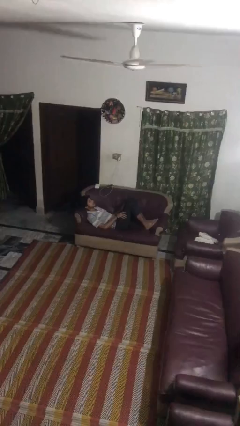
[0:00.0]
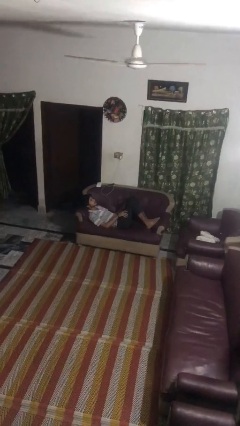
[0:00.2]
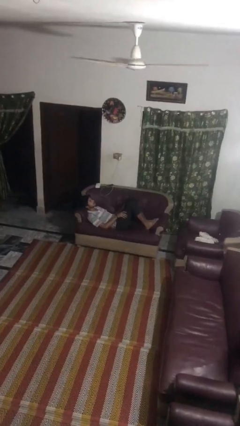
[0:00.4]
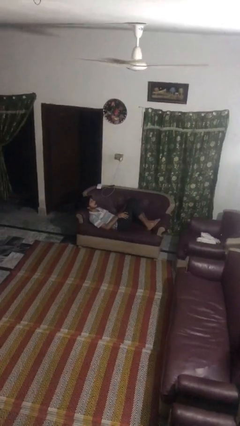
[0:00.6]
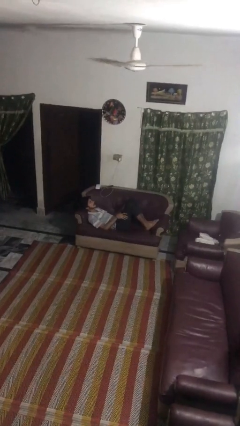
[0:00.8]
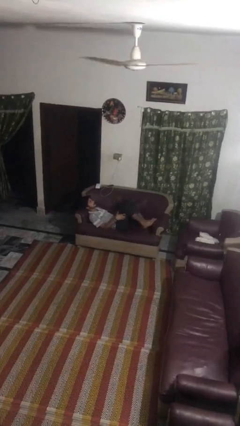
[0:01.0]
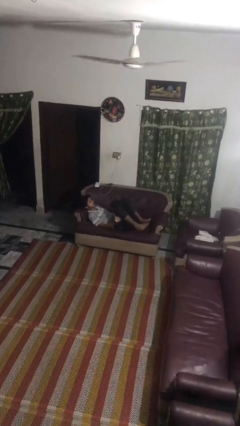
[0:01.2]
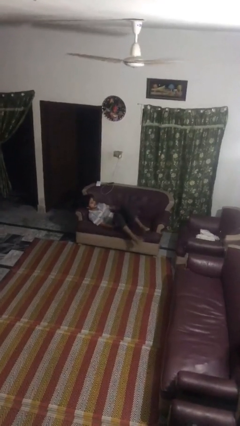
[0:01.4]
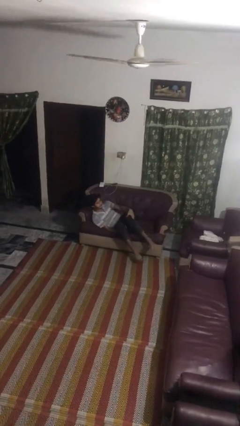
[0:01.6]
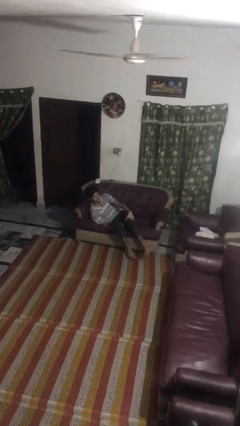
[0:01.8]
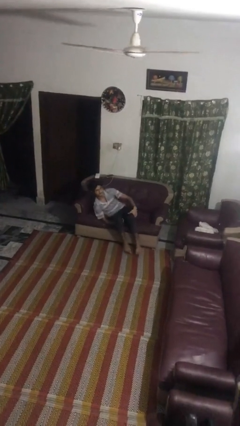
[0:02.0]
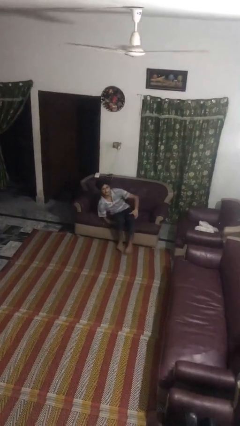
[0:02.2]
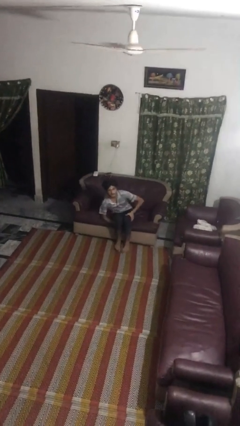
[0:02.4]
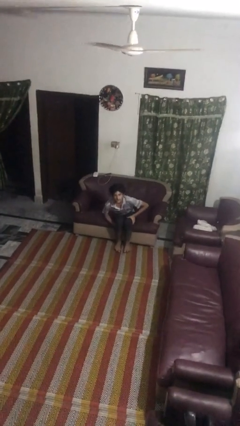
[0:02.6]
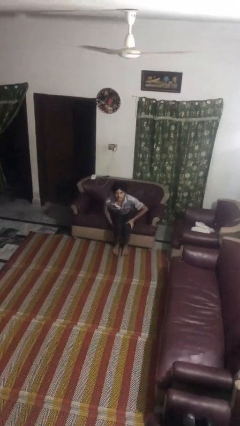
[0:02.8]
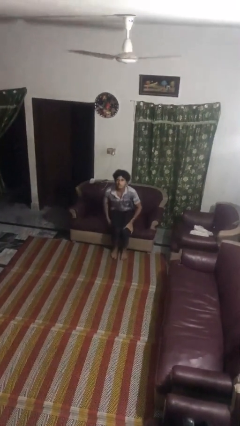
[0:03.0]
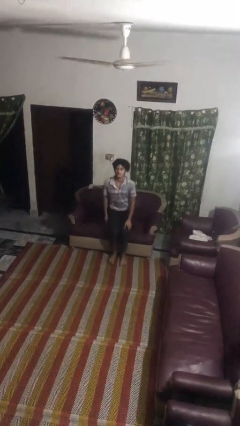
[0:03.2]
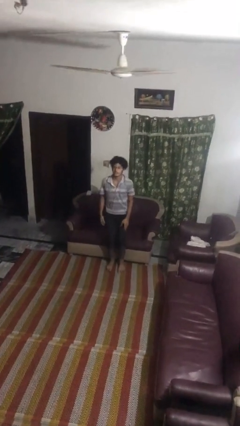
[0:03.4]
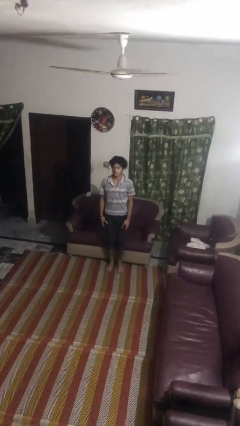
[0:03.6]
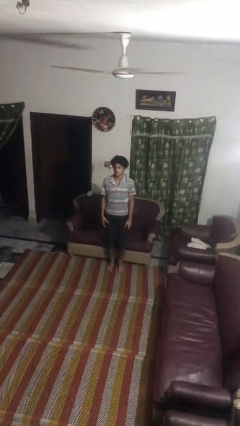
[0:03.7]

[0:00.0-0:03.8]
person stands up

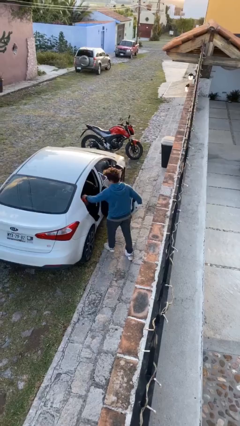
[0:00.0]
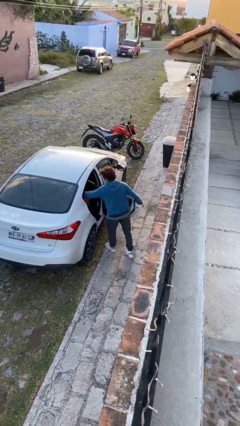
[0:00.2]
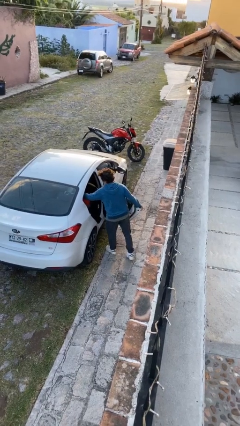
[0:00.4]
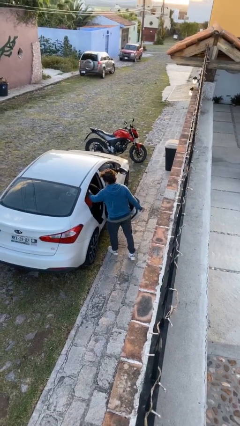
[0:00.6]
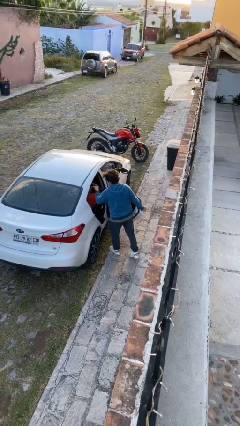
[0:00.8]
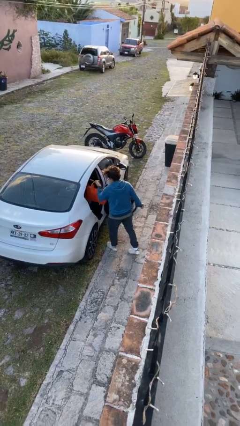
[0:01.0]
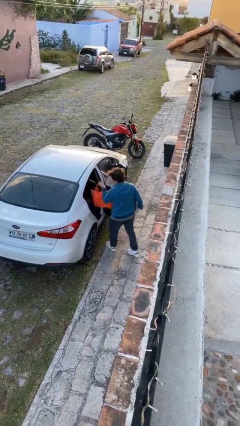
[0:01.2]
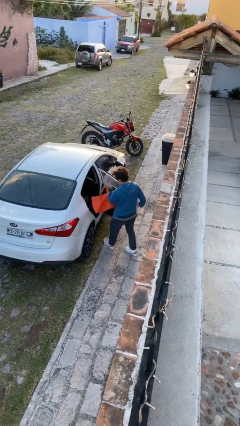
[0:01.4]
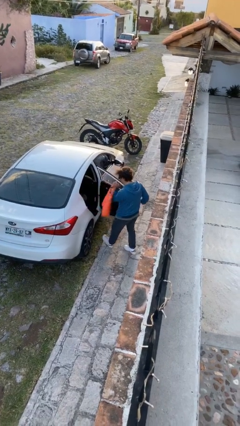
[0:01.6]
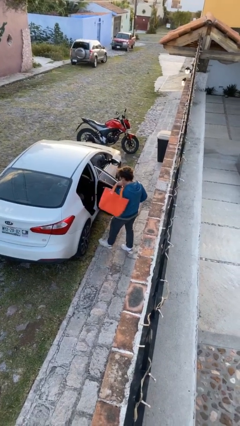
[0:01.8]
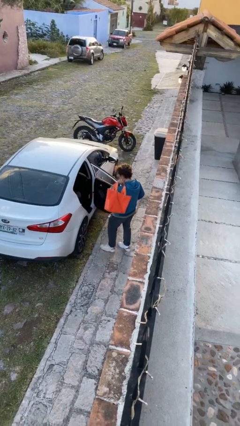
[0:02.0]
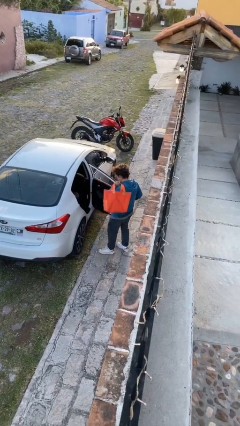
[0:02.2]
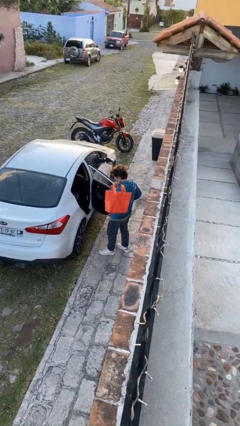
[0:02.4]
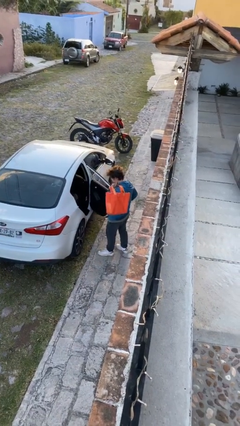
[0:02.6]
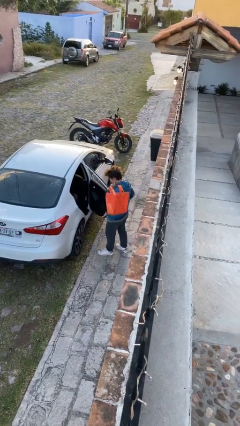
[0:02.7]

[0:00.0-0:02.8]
person unloads car

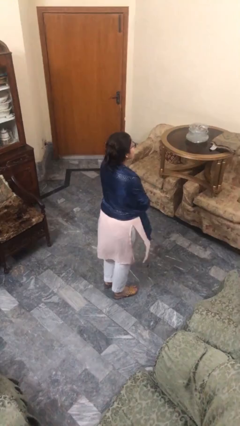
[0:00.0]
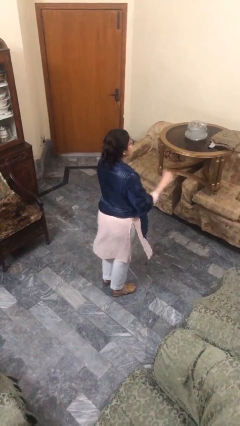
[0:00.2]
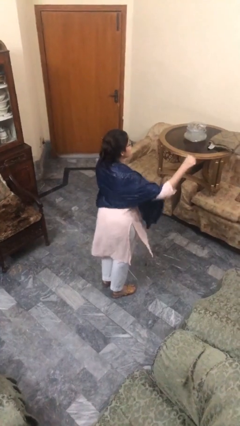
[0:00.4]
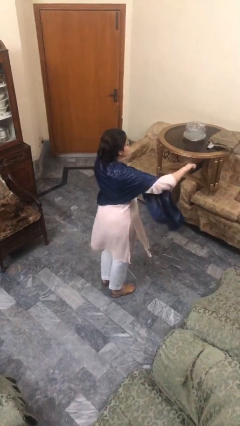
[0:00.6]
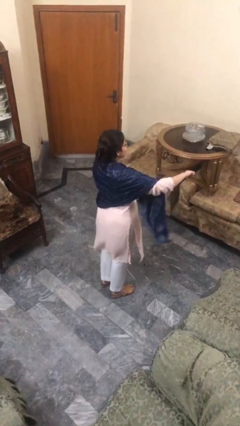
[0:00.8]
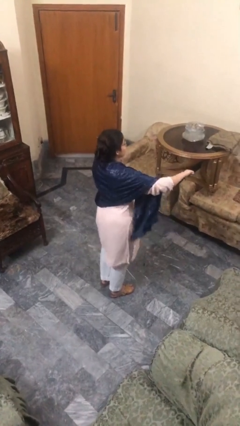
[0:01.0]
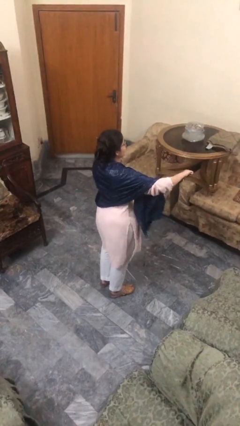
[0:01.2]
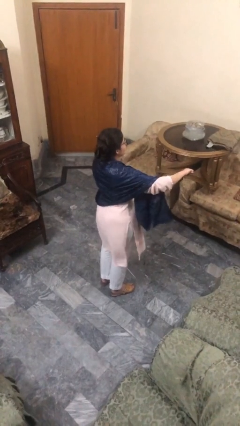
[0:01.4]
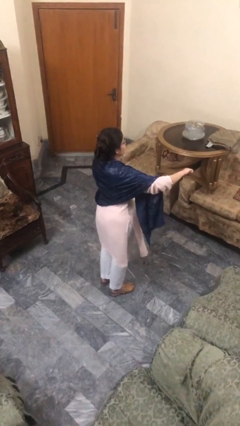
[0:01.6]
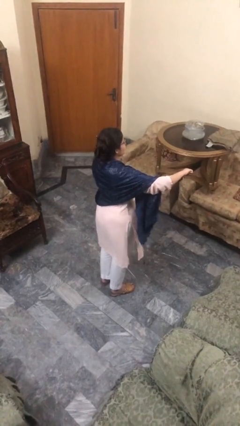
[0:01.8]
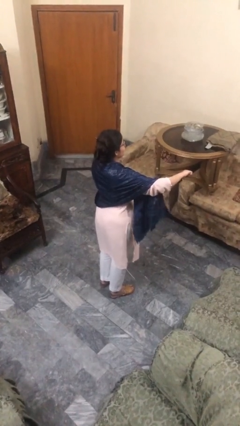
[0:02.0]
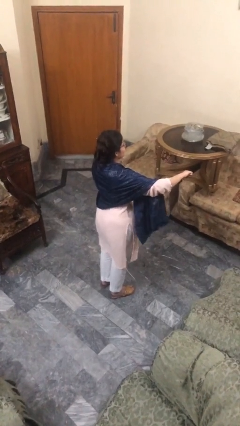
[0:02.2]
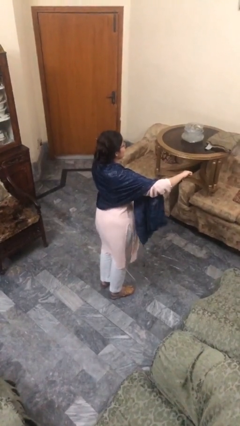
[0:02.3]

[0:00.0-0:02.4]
person gestures thumbs down

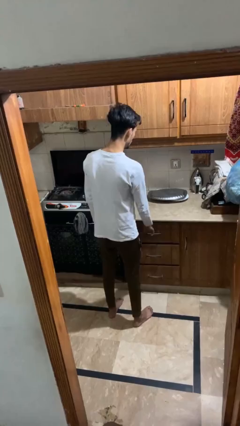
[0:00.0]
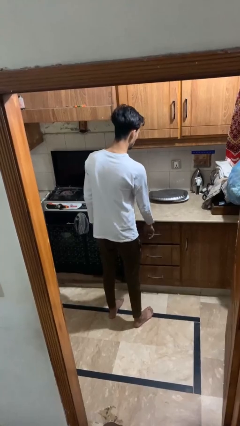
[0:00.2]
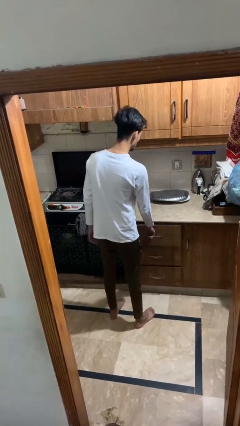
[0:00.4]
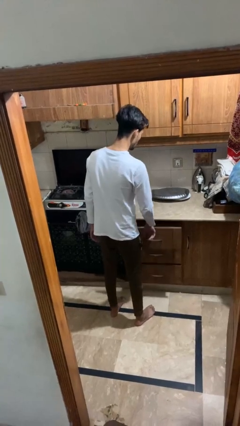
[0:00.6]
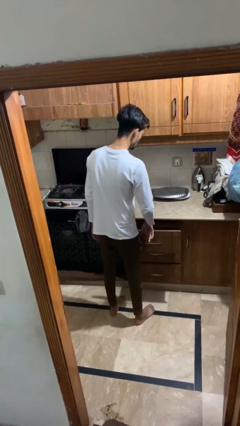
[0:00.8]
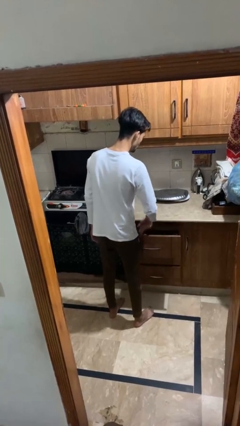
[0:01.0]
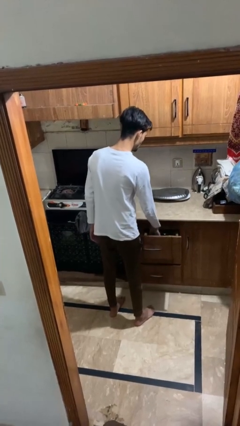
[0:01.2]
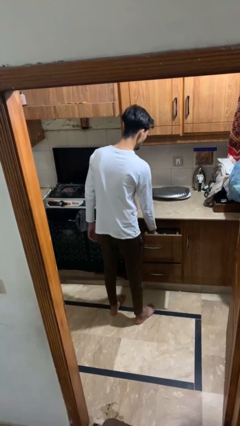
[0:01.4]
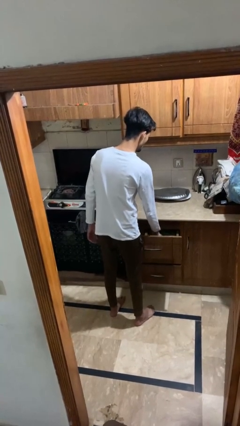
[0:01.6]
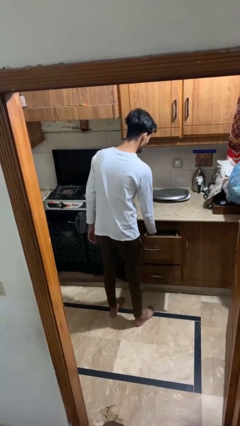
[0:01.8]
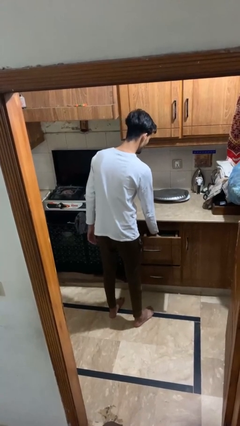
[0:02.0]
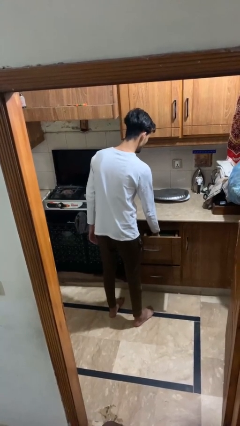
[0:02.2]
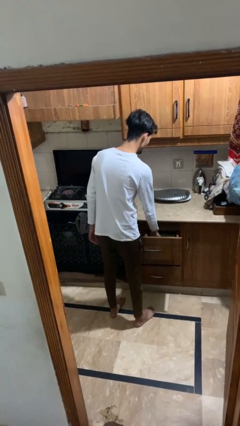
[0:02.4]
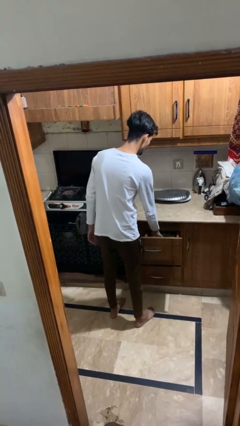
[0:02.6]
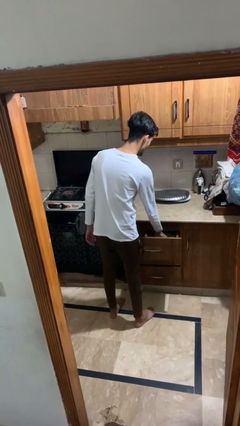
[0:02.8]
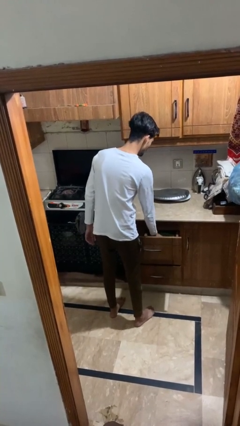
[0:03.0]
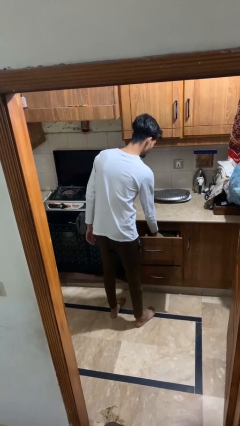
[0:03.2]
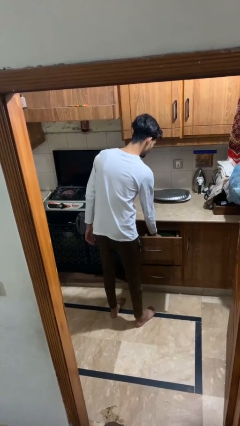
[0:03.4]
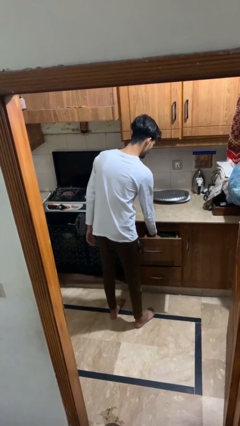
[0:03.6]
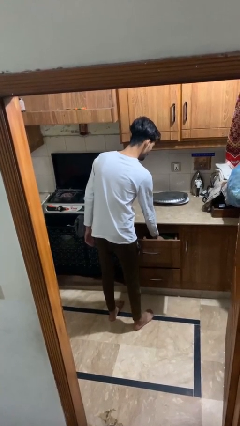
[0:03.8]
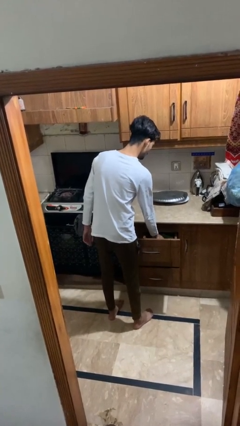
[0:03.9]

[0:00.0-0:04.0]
person searches in kitchen drawer

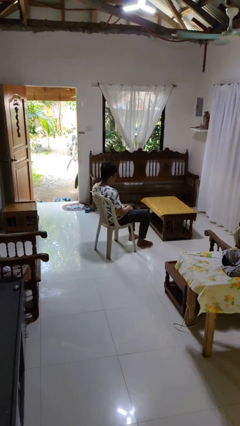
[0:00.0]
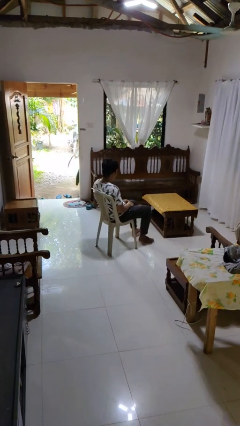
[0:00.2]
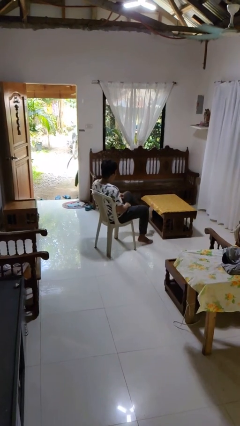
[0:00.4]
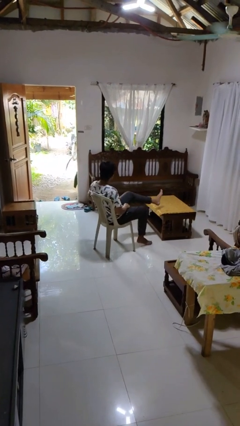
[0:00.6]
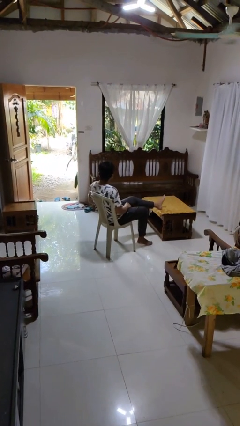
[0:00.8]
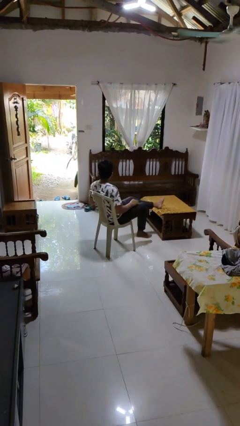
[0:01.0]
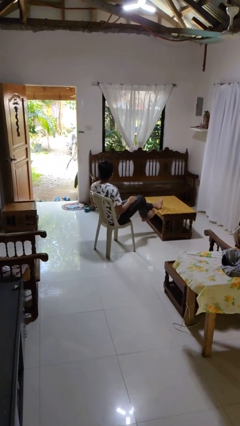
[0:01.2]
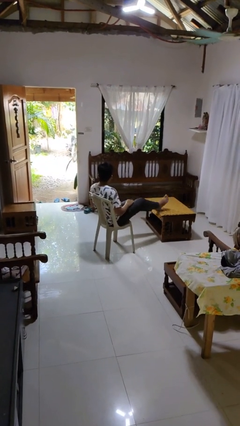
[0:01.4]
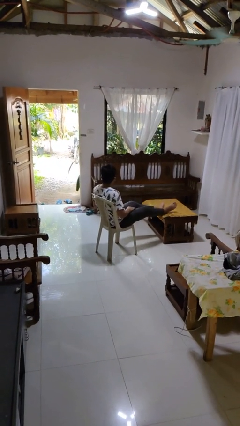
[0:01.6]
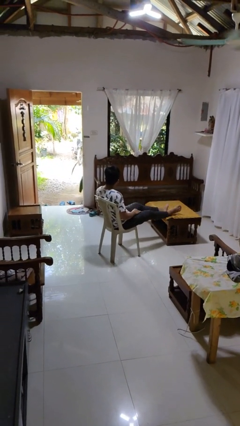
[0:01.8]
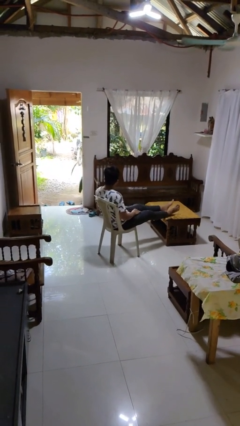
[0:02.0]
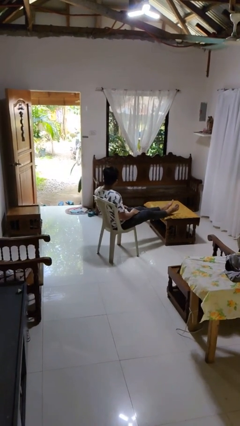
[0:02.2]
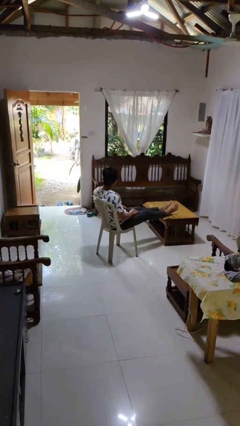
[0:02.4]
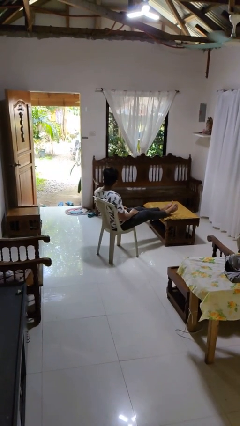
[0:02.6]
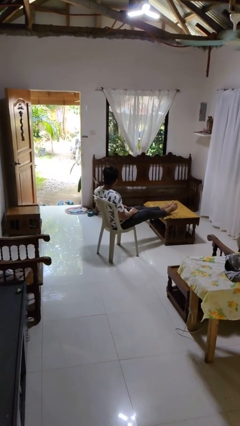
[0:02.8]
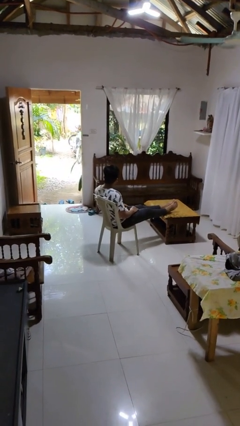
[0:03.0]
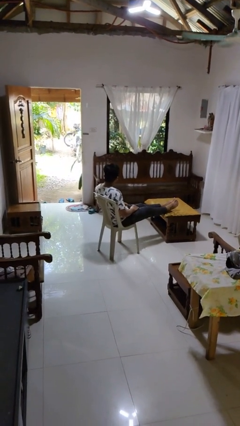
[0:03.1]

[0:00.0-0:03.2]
person puts feet up

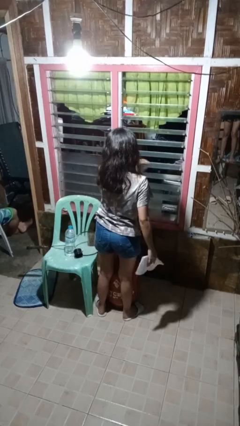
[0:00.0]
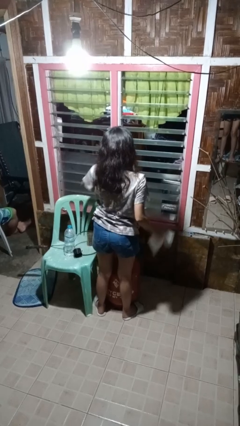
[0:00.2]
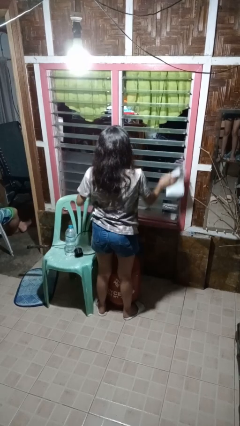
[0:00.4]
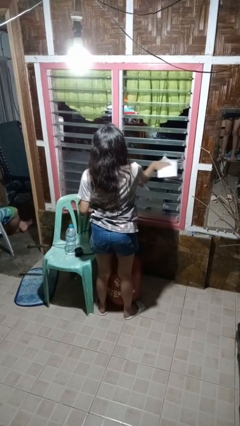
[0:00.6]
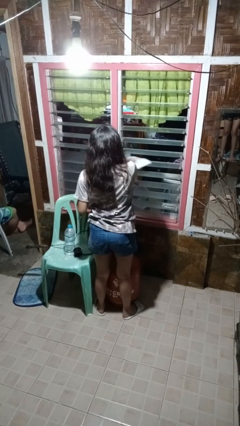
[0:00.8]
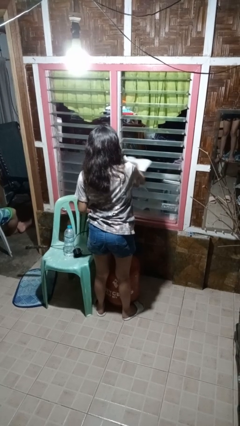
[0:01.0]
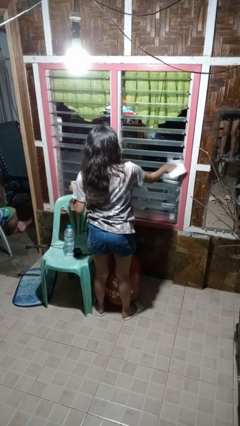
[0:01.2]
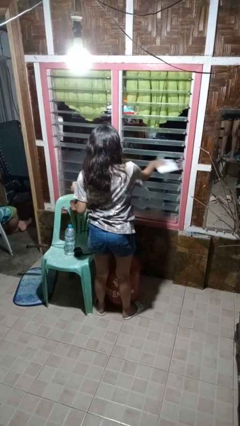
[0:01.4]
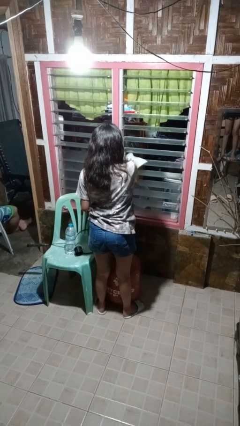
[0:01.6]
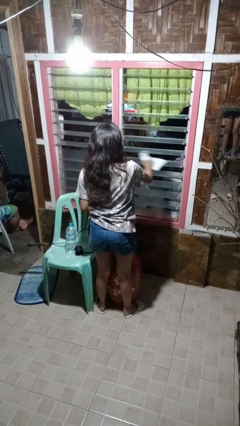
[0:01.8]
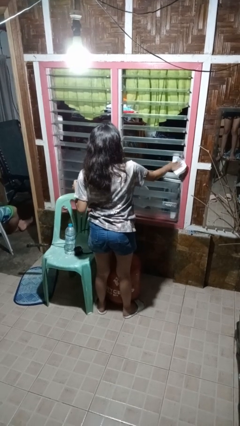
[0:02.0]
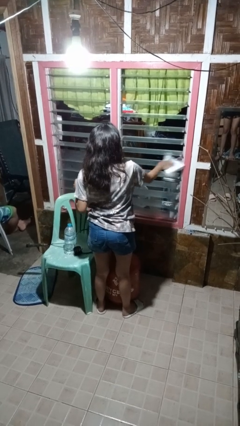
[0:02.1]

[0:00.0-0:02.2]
person washes window
